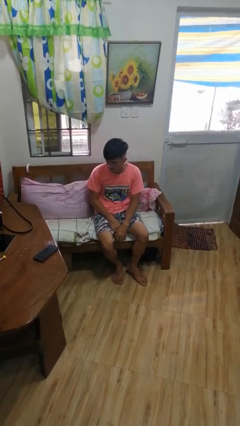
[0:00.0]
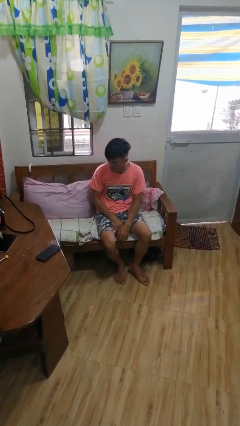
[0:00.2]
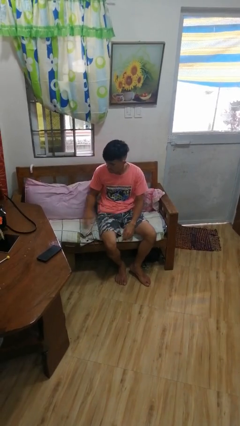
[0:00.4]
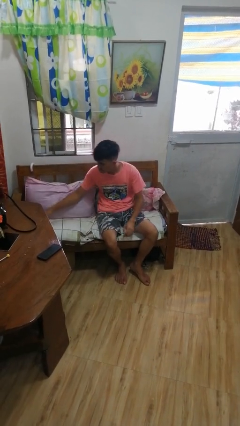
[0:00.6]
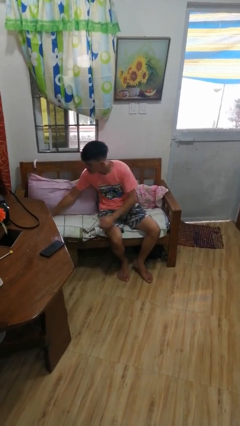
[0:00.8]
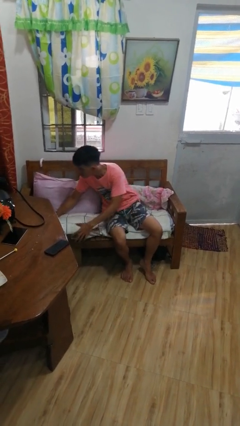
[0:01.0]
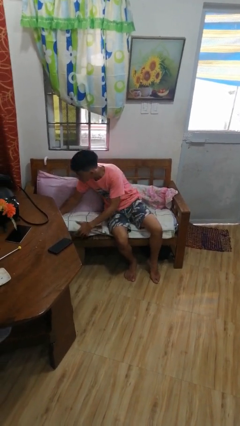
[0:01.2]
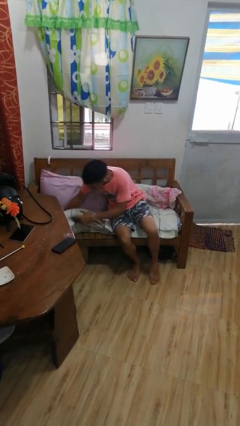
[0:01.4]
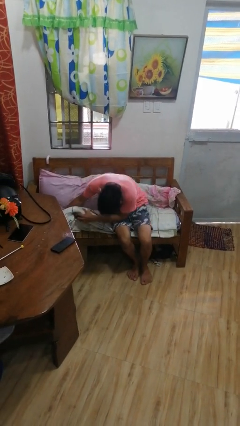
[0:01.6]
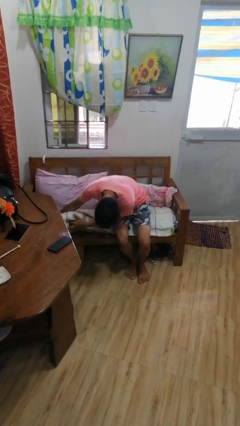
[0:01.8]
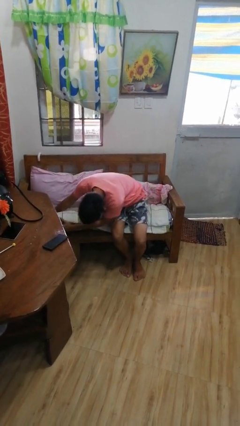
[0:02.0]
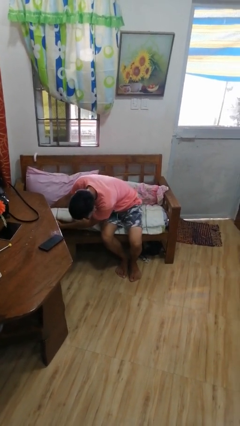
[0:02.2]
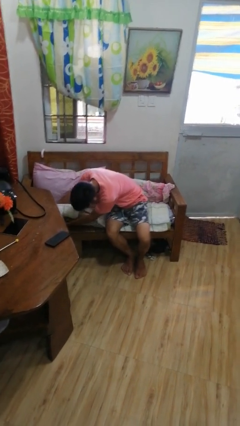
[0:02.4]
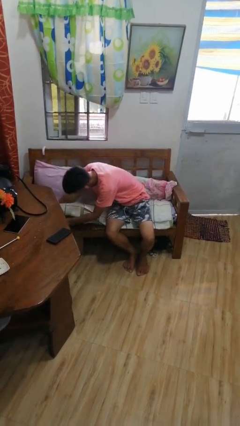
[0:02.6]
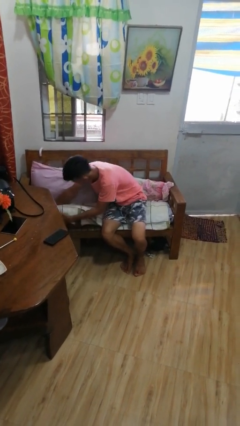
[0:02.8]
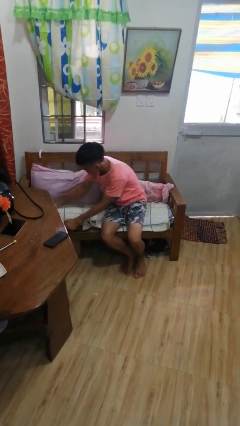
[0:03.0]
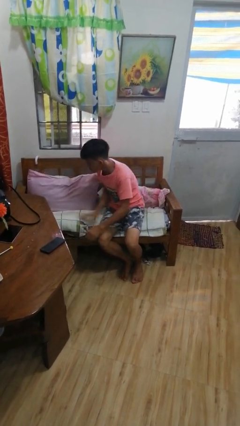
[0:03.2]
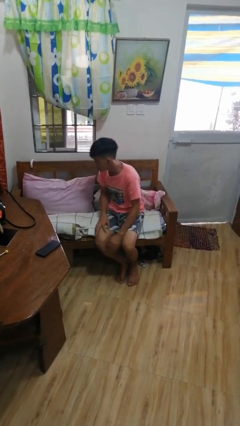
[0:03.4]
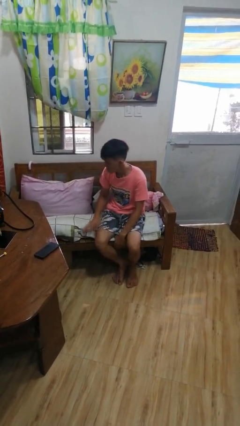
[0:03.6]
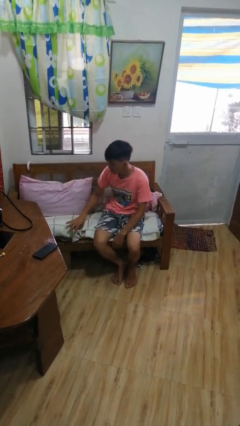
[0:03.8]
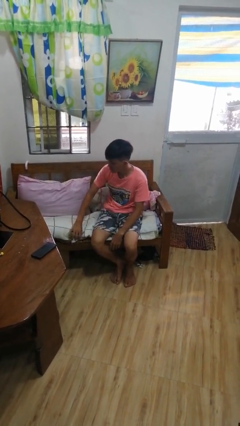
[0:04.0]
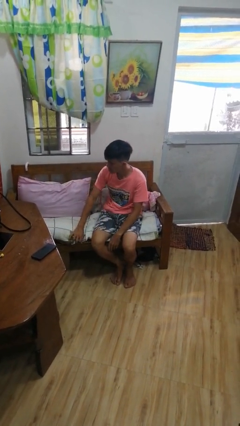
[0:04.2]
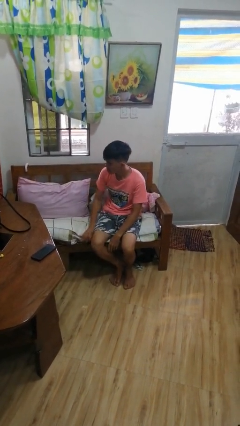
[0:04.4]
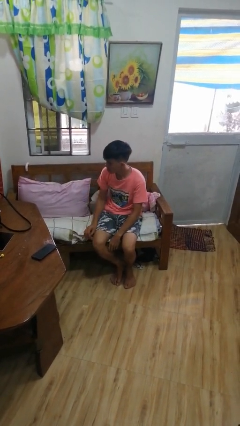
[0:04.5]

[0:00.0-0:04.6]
person searches in couch

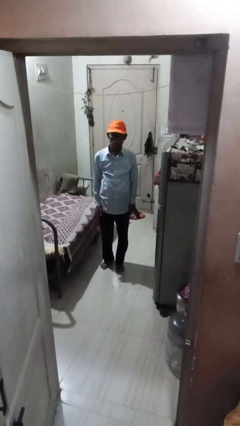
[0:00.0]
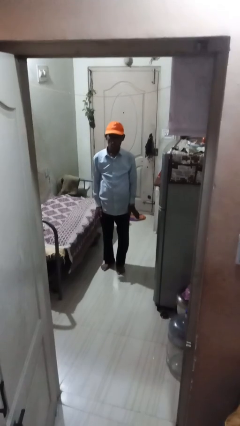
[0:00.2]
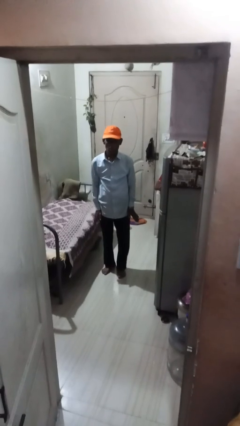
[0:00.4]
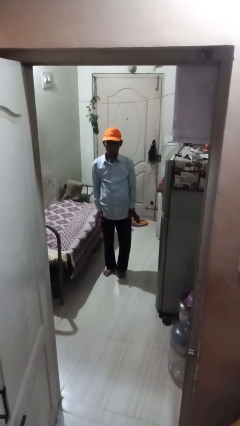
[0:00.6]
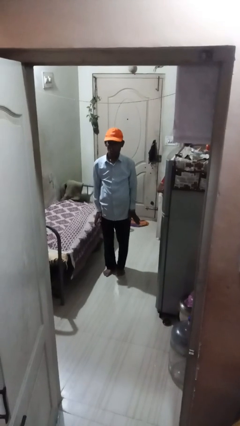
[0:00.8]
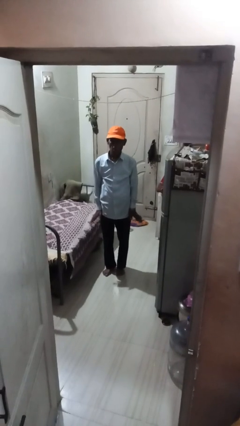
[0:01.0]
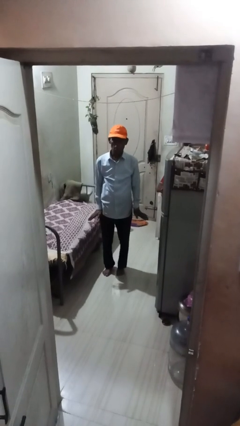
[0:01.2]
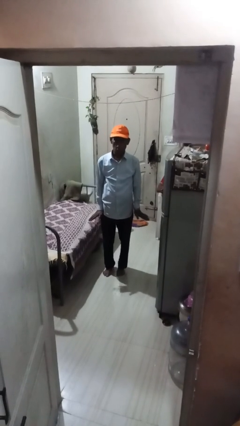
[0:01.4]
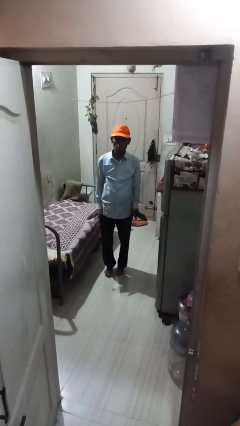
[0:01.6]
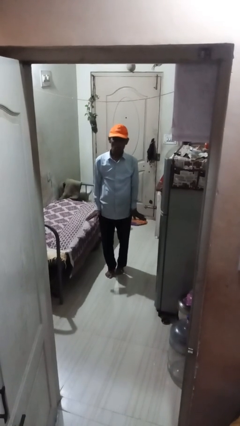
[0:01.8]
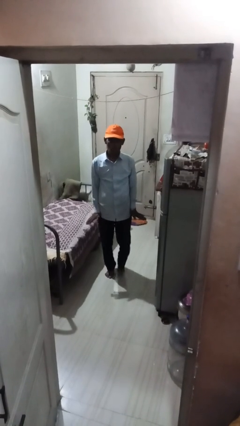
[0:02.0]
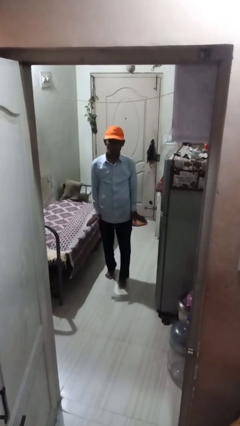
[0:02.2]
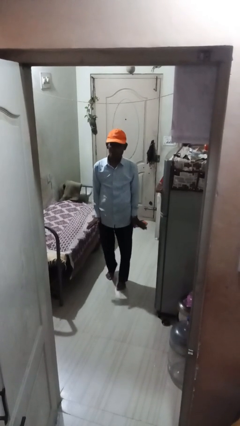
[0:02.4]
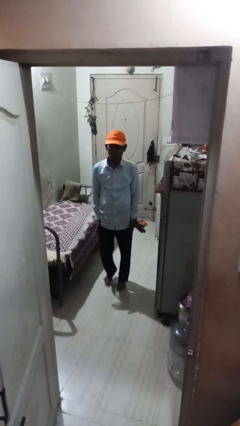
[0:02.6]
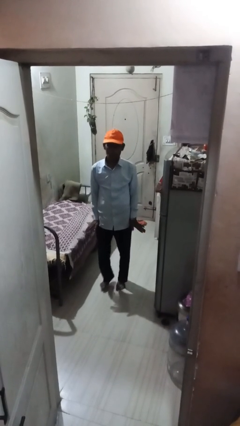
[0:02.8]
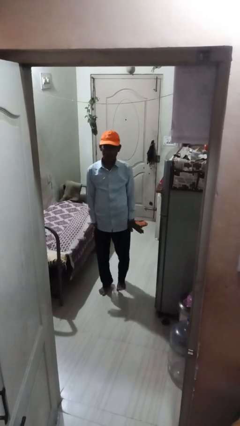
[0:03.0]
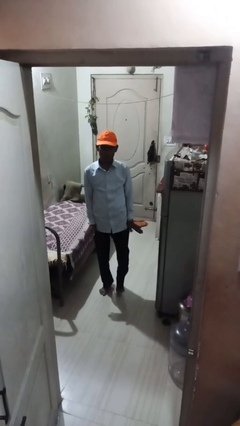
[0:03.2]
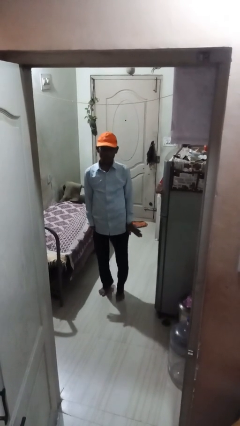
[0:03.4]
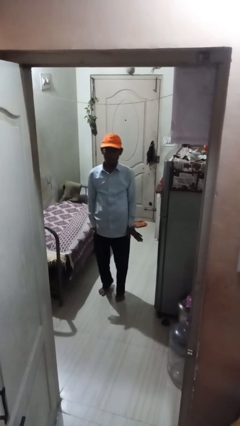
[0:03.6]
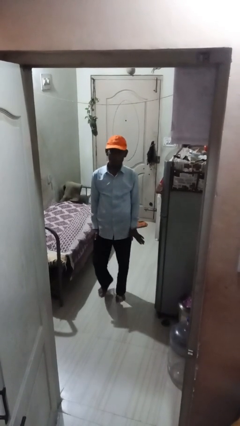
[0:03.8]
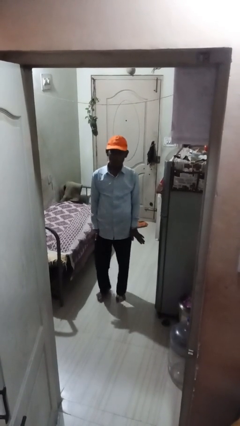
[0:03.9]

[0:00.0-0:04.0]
person walks tiptoe

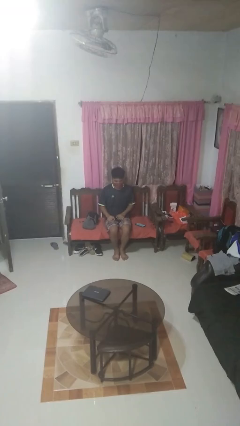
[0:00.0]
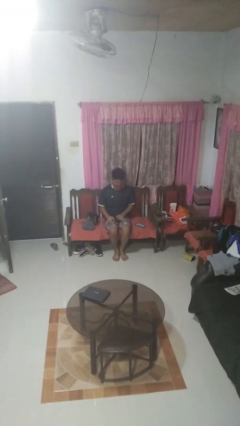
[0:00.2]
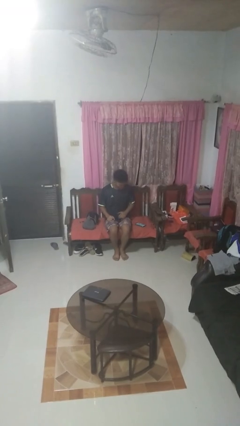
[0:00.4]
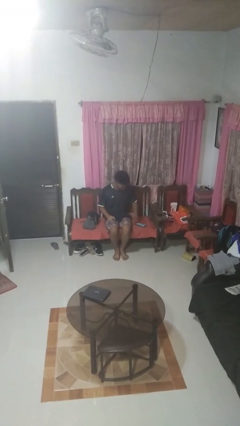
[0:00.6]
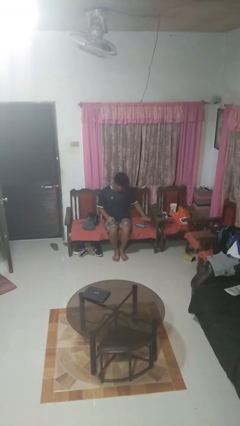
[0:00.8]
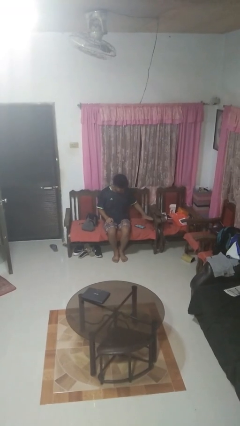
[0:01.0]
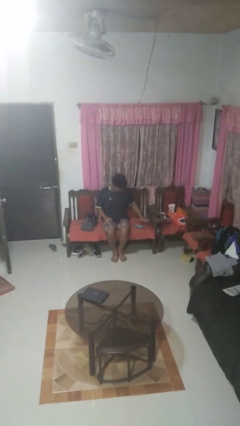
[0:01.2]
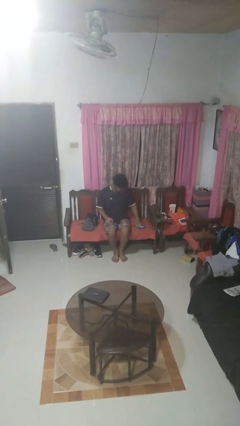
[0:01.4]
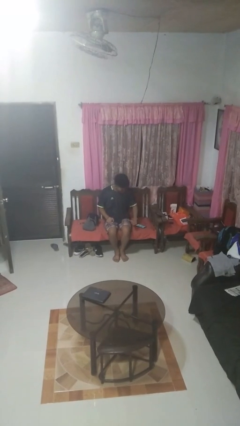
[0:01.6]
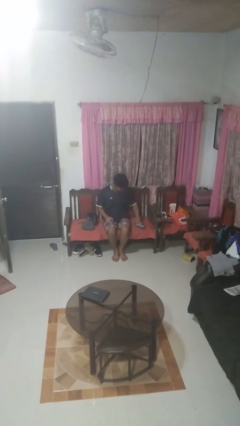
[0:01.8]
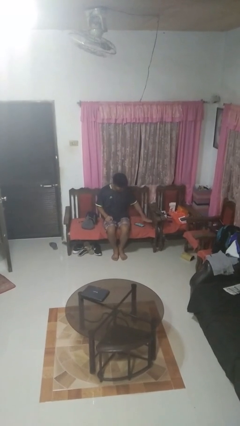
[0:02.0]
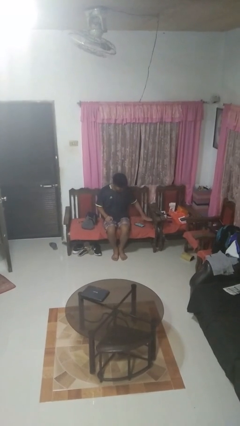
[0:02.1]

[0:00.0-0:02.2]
person waves hand over object

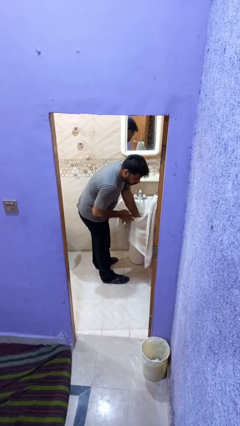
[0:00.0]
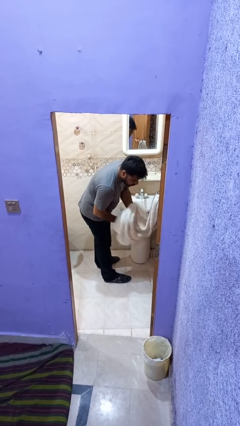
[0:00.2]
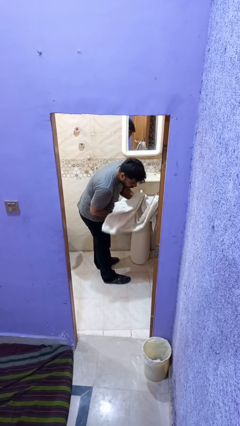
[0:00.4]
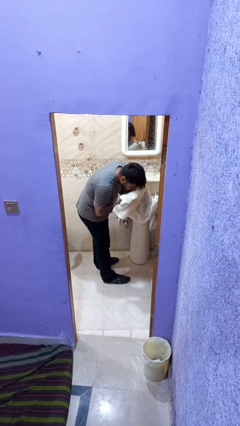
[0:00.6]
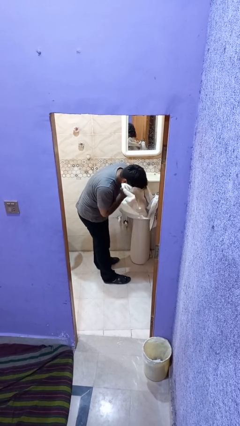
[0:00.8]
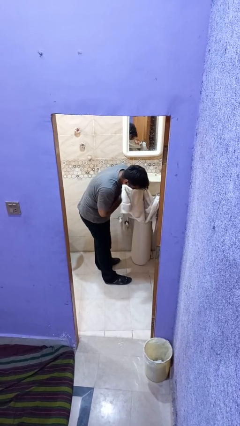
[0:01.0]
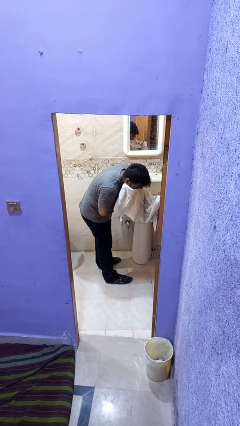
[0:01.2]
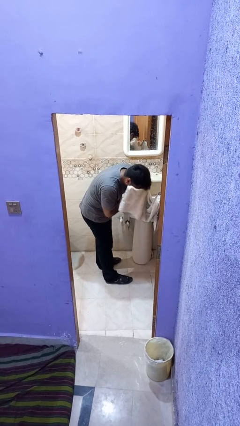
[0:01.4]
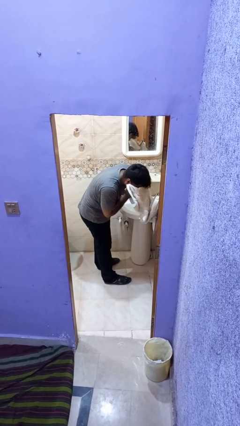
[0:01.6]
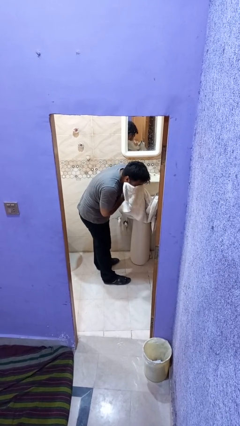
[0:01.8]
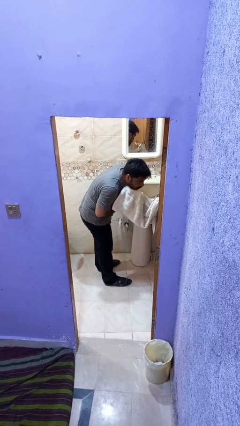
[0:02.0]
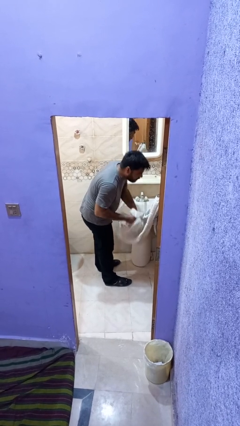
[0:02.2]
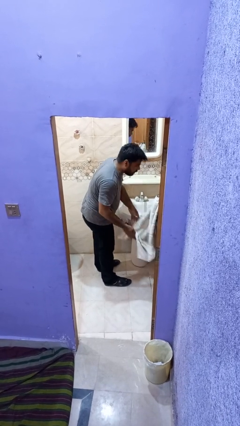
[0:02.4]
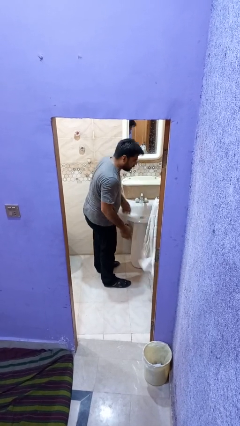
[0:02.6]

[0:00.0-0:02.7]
person dries face with towel

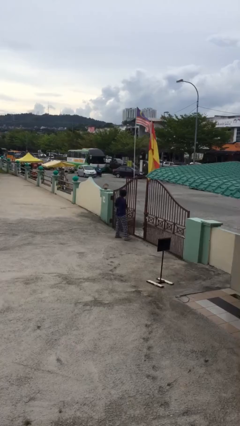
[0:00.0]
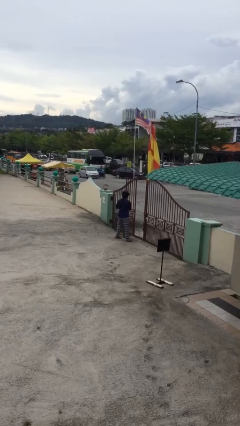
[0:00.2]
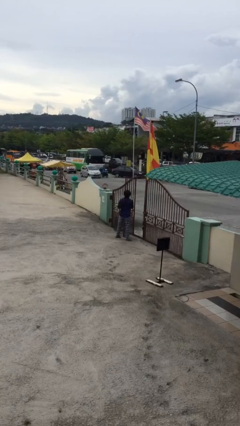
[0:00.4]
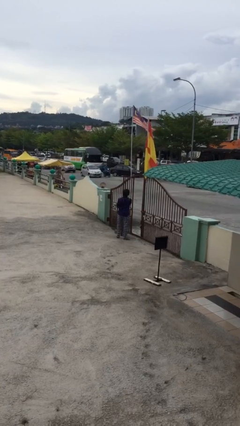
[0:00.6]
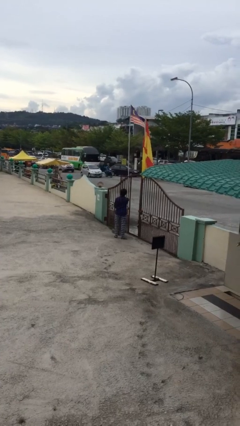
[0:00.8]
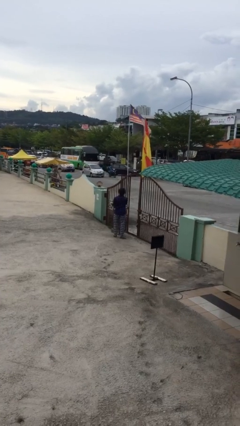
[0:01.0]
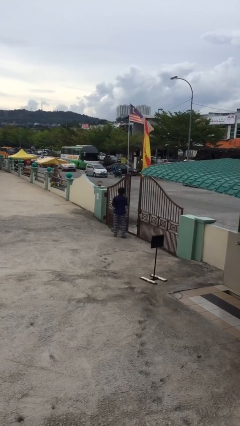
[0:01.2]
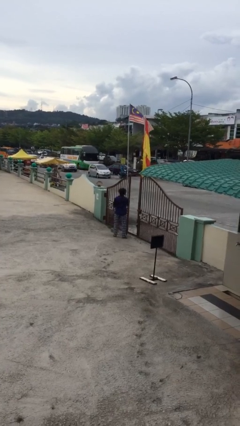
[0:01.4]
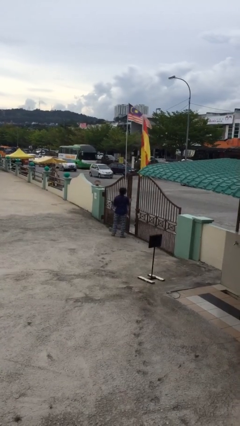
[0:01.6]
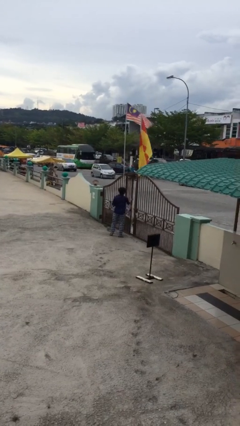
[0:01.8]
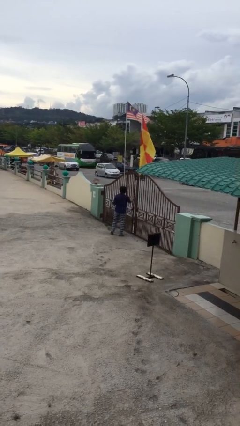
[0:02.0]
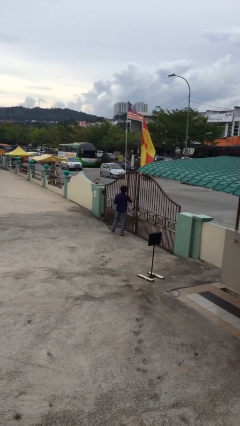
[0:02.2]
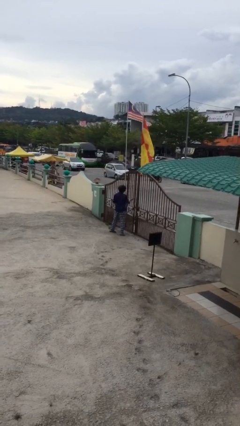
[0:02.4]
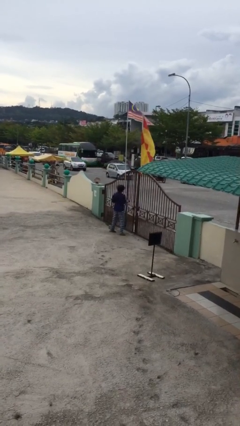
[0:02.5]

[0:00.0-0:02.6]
person closes facility door

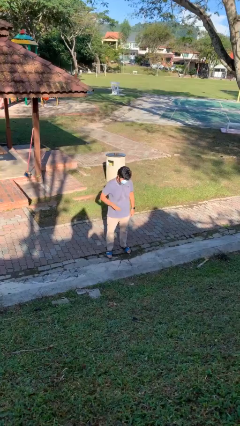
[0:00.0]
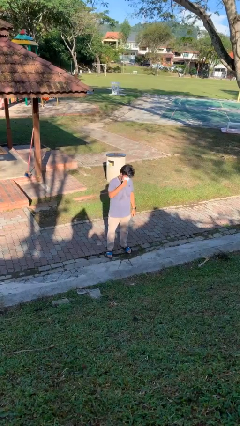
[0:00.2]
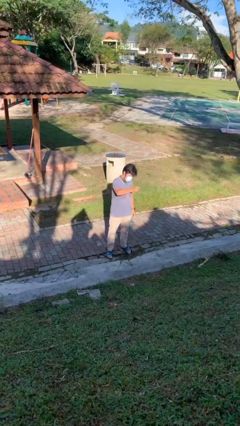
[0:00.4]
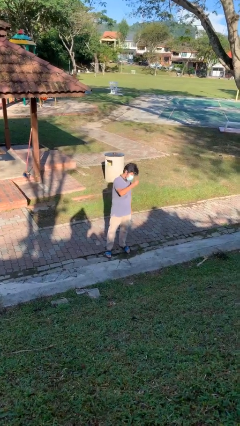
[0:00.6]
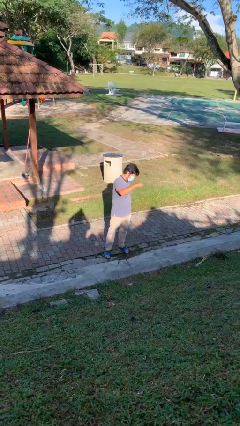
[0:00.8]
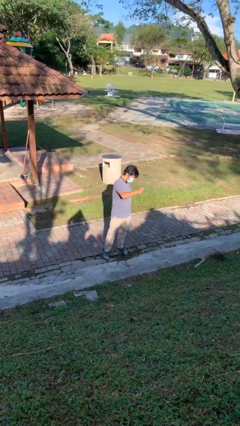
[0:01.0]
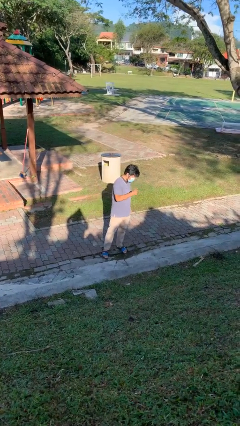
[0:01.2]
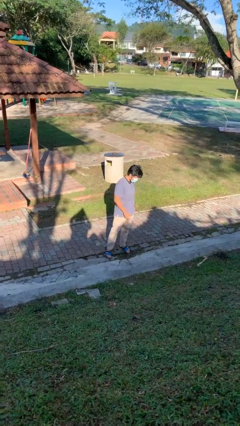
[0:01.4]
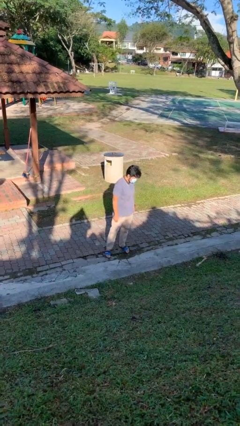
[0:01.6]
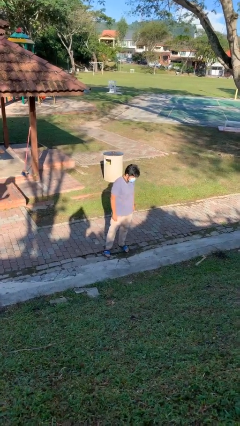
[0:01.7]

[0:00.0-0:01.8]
person snaps fingers
